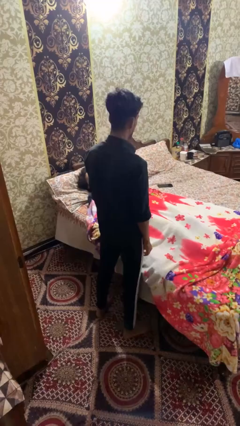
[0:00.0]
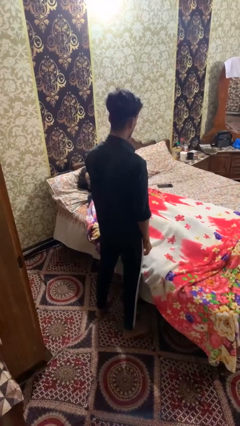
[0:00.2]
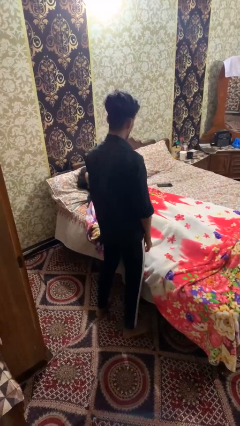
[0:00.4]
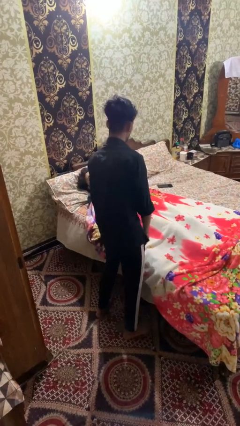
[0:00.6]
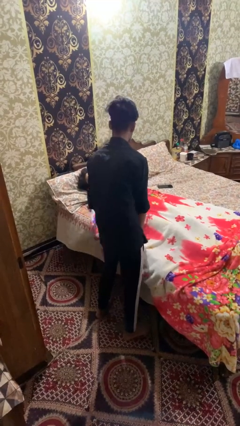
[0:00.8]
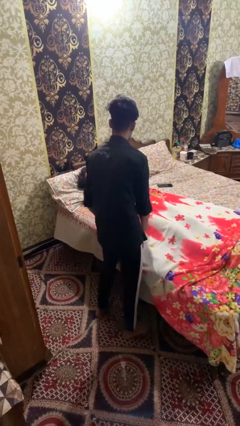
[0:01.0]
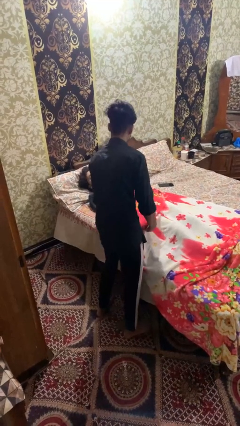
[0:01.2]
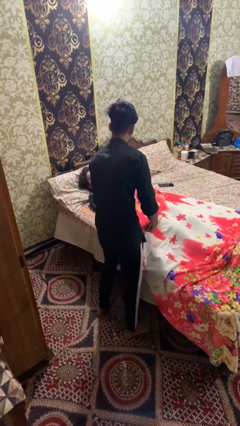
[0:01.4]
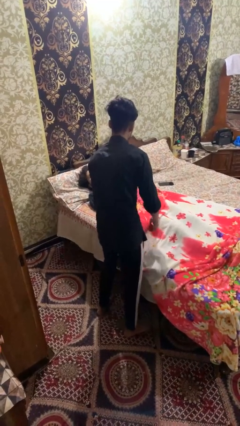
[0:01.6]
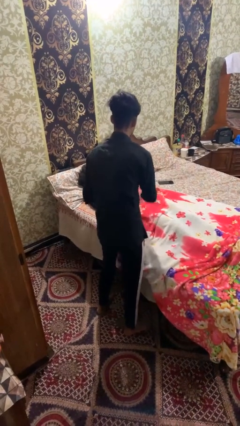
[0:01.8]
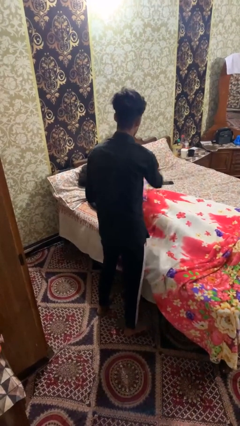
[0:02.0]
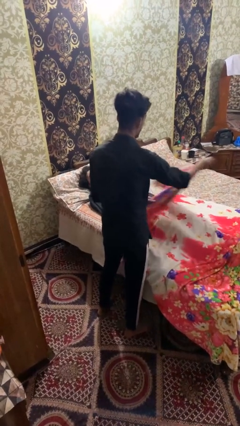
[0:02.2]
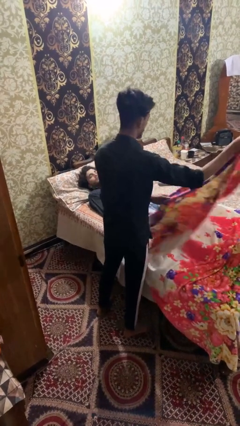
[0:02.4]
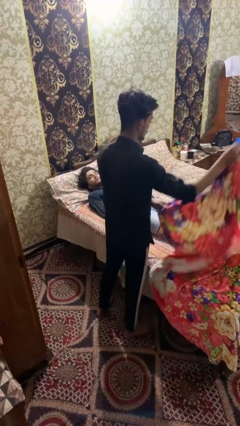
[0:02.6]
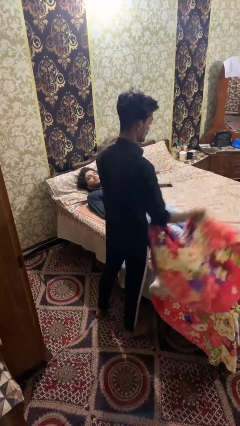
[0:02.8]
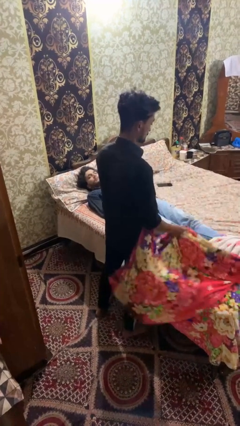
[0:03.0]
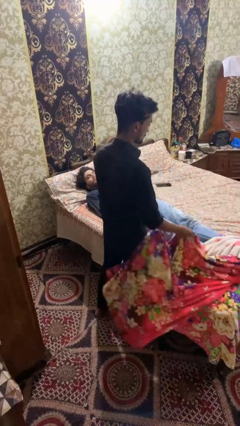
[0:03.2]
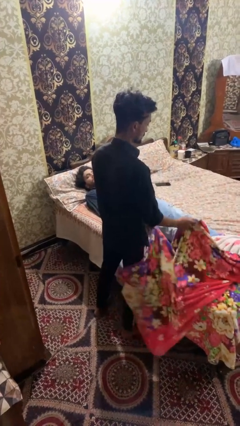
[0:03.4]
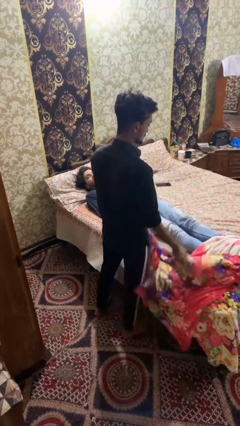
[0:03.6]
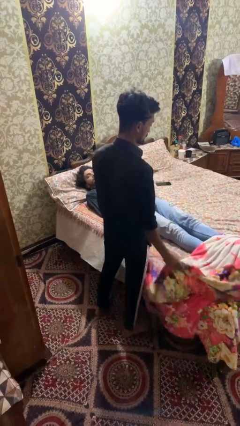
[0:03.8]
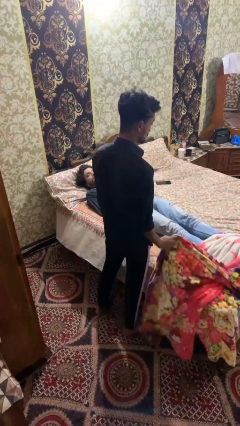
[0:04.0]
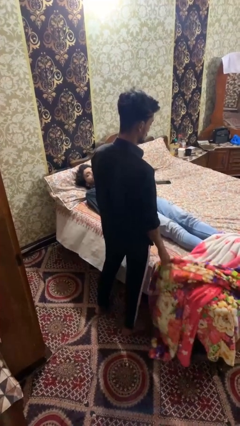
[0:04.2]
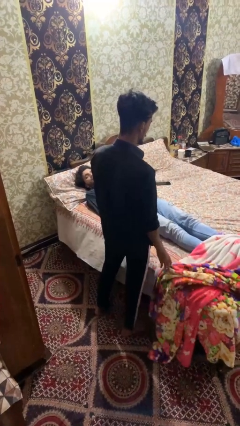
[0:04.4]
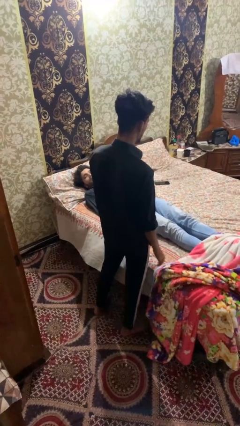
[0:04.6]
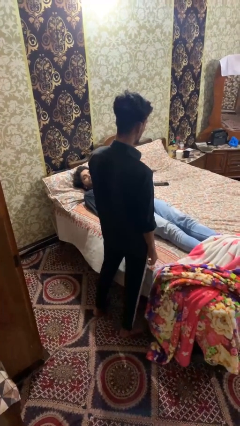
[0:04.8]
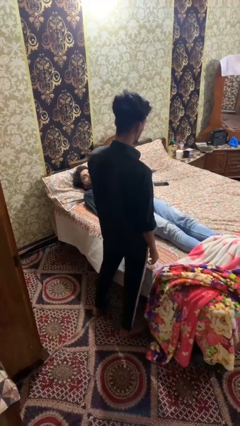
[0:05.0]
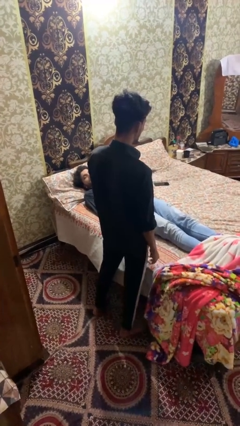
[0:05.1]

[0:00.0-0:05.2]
person uncovers friend with blanket

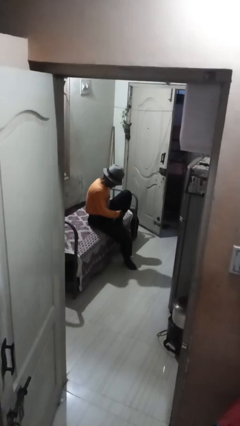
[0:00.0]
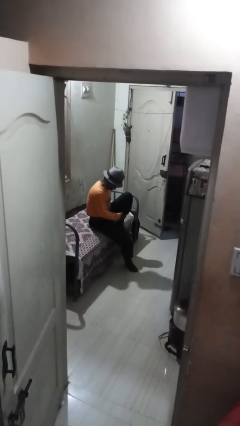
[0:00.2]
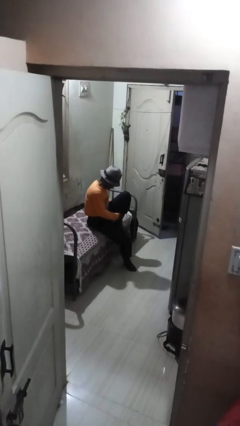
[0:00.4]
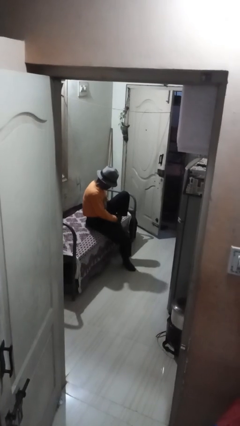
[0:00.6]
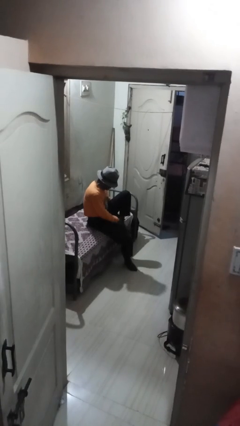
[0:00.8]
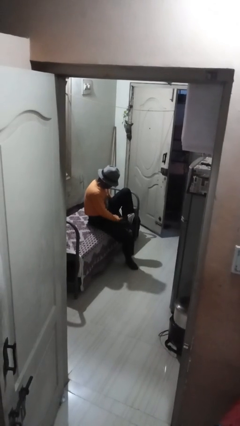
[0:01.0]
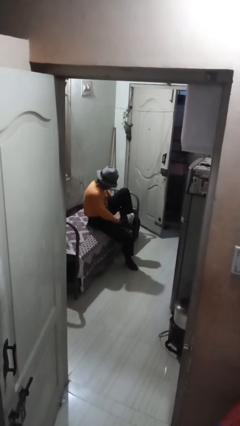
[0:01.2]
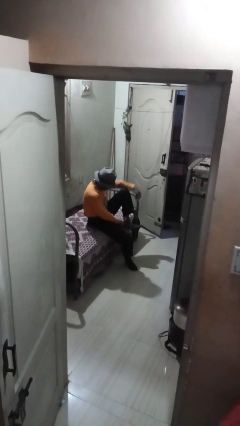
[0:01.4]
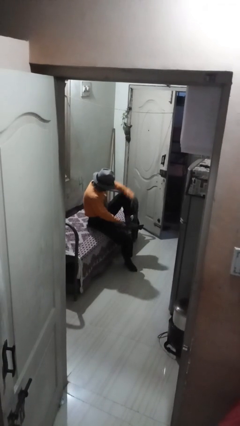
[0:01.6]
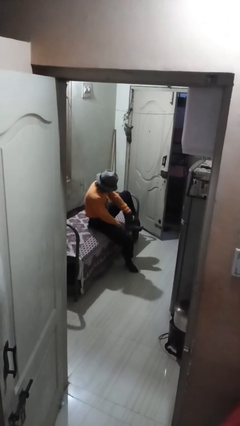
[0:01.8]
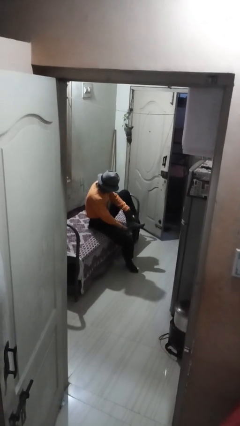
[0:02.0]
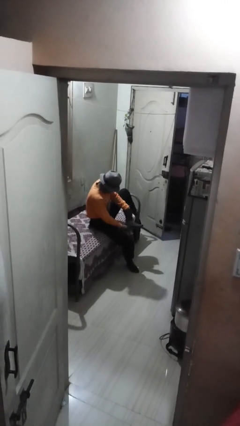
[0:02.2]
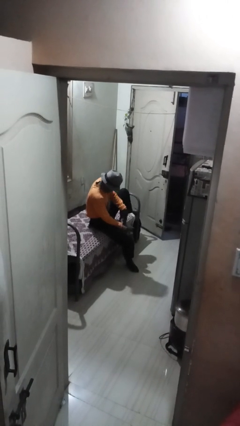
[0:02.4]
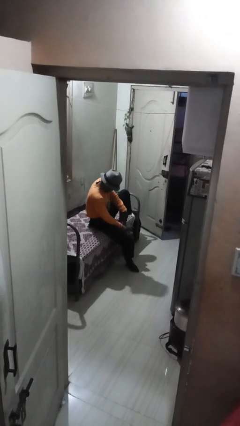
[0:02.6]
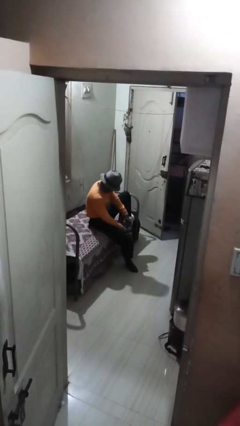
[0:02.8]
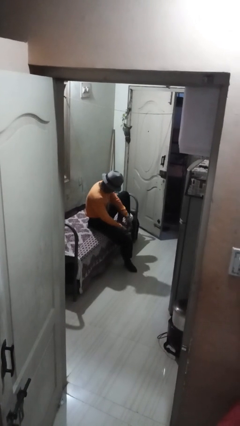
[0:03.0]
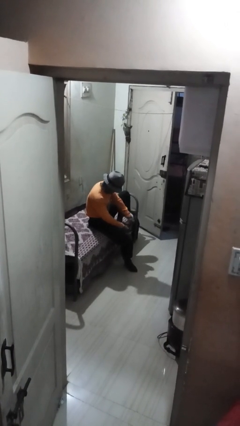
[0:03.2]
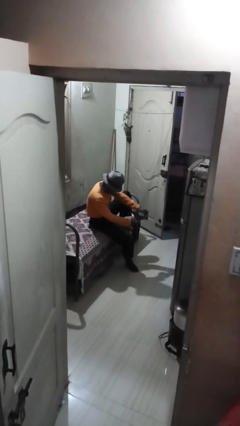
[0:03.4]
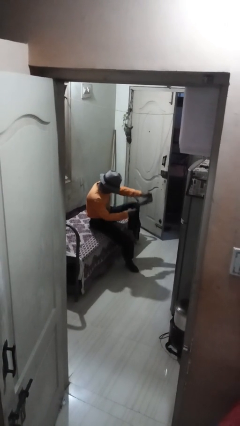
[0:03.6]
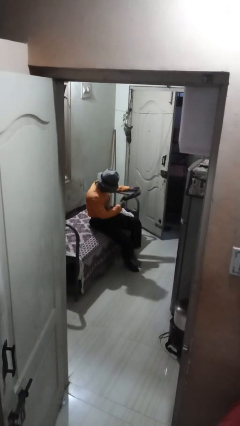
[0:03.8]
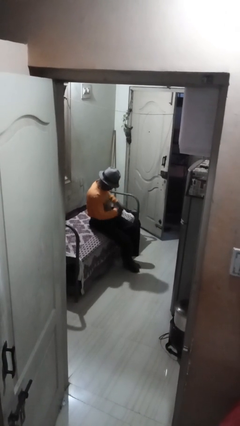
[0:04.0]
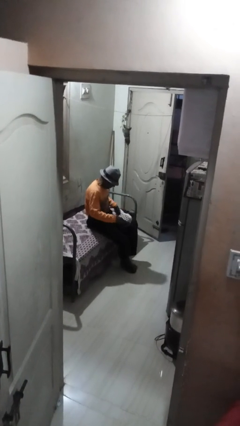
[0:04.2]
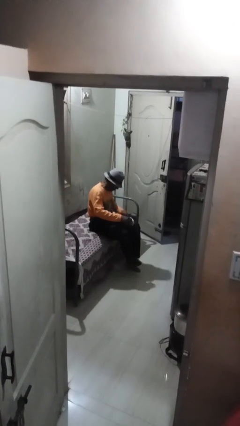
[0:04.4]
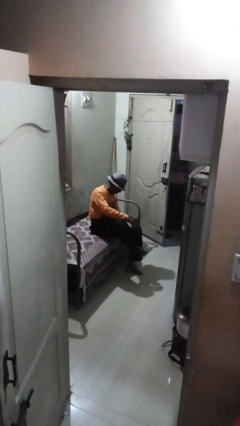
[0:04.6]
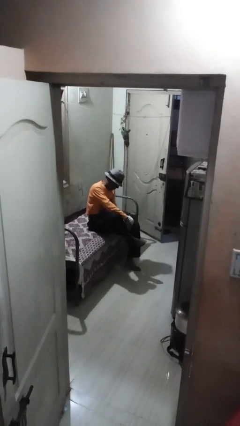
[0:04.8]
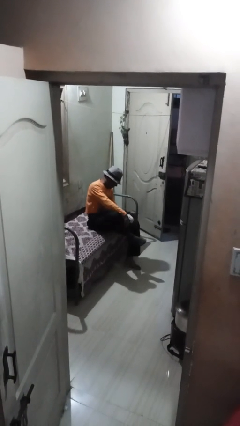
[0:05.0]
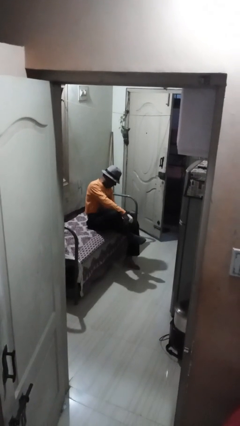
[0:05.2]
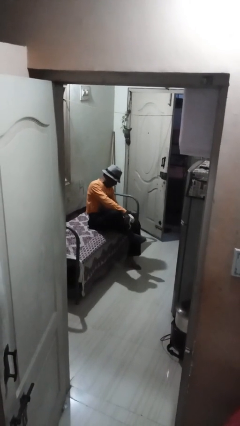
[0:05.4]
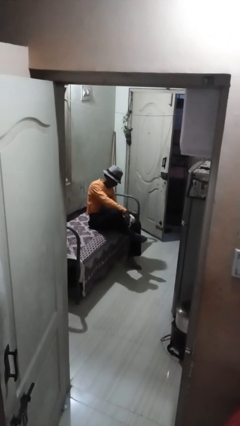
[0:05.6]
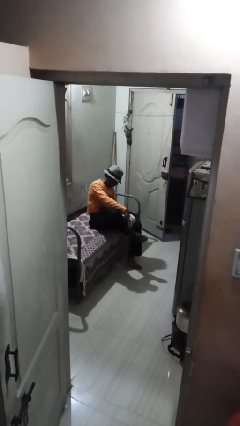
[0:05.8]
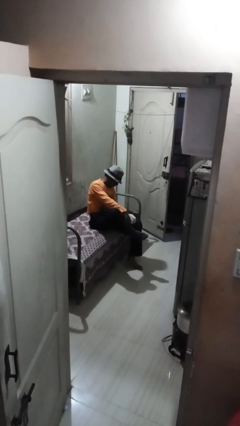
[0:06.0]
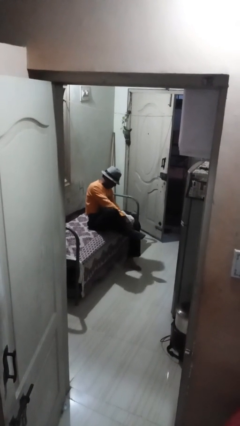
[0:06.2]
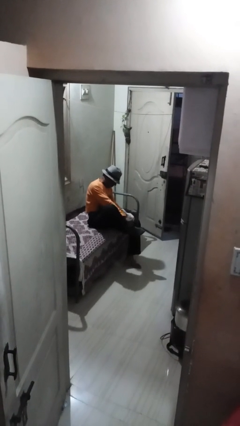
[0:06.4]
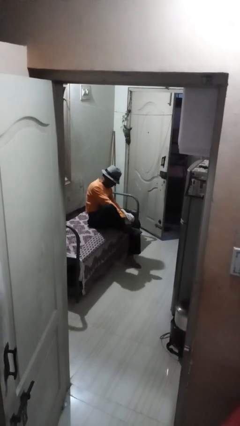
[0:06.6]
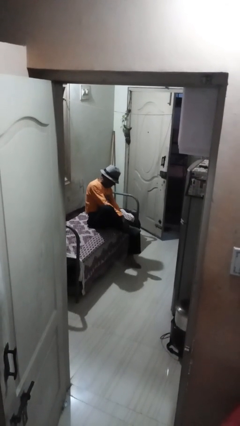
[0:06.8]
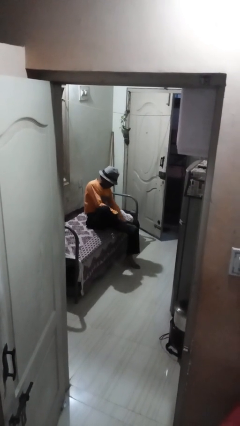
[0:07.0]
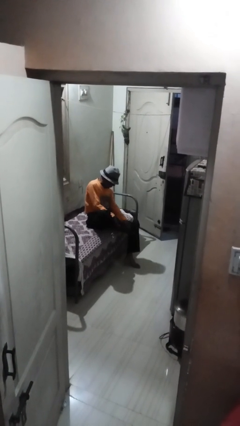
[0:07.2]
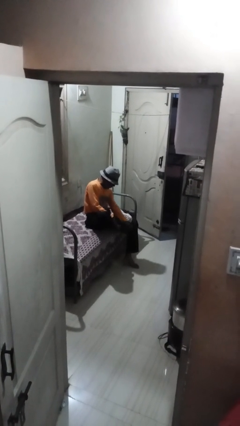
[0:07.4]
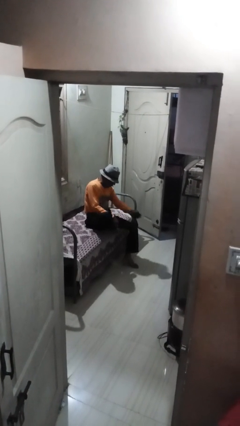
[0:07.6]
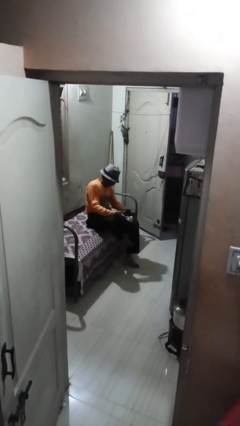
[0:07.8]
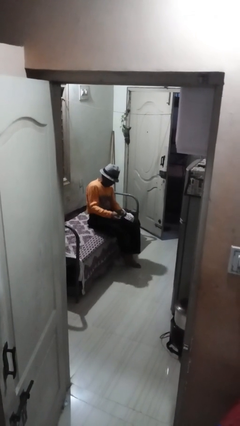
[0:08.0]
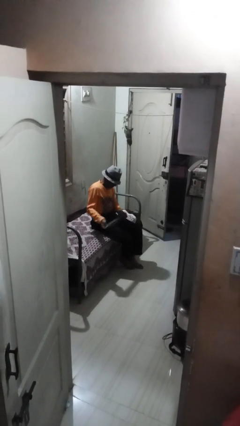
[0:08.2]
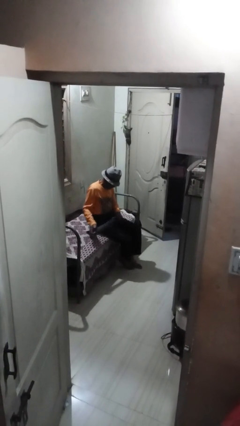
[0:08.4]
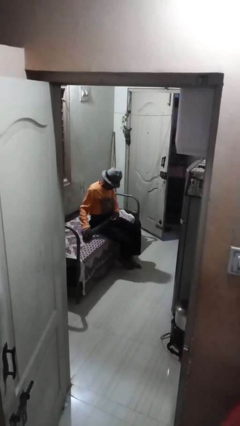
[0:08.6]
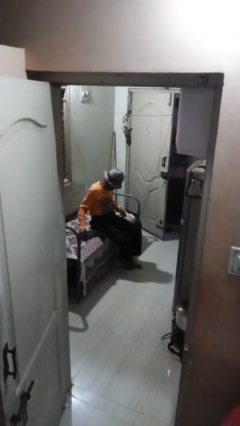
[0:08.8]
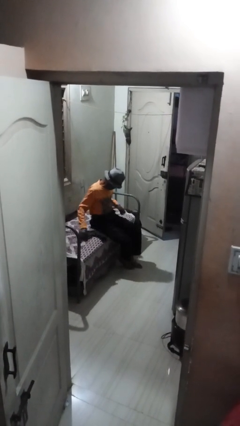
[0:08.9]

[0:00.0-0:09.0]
person takes off socks

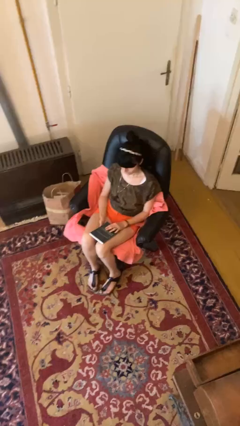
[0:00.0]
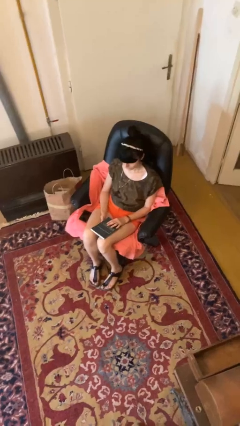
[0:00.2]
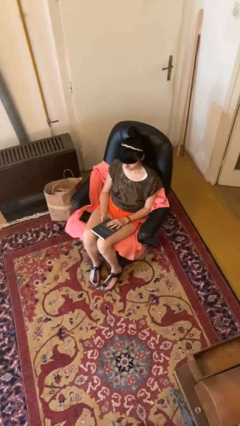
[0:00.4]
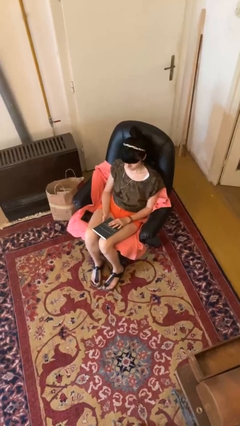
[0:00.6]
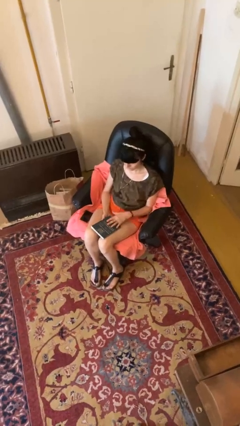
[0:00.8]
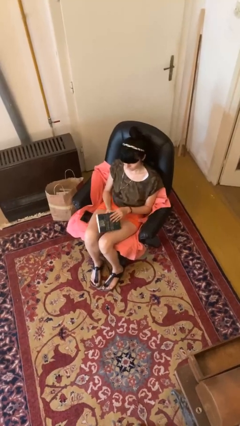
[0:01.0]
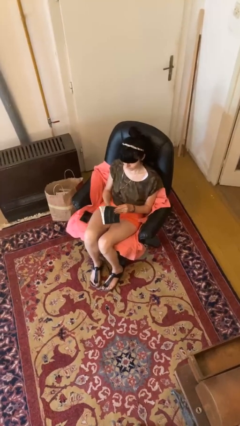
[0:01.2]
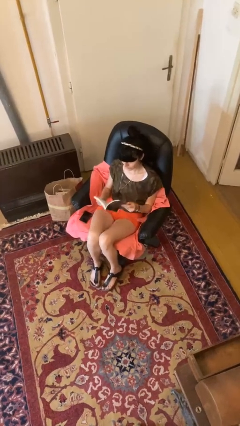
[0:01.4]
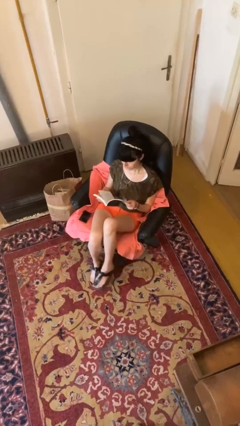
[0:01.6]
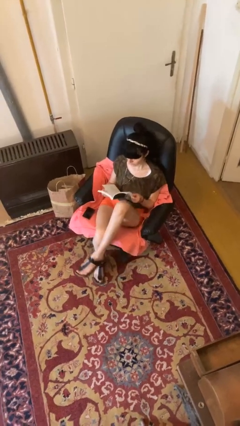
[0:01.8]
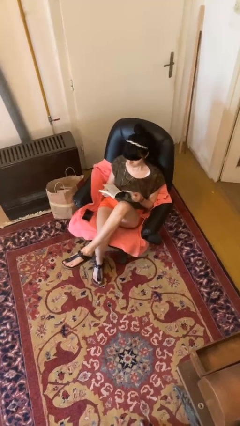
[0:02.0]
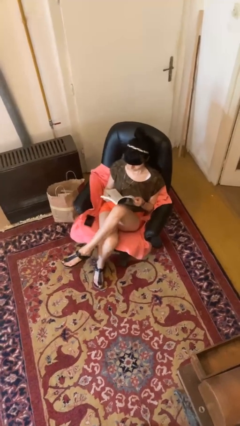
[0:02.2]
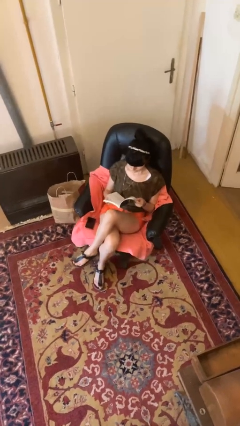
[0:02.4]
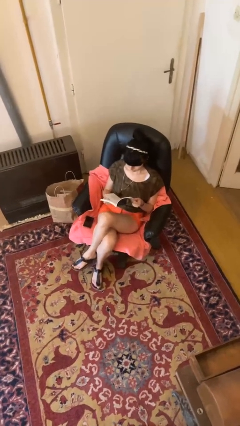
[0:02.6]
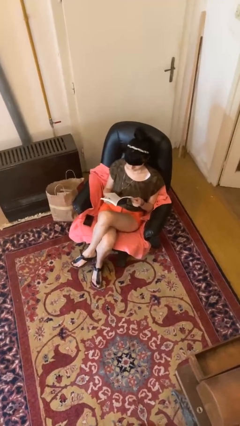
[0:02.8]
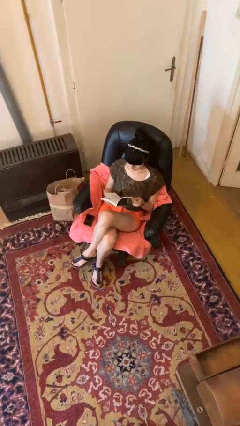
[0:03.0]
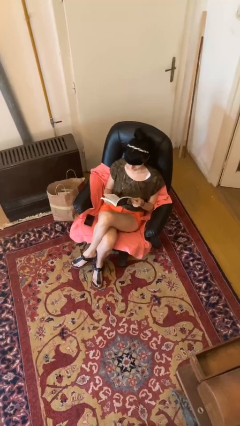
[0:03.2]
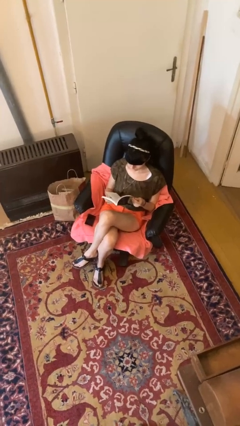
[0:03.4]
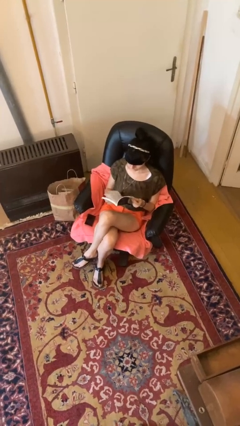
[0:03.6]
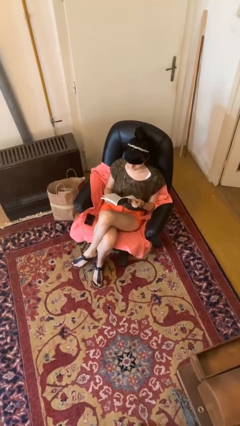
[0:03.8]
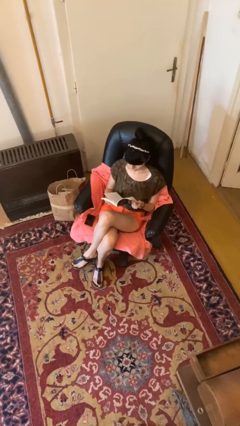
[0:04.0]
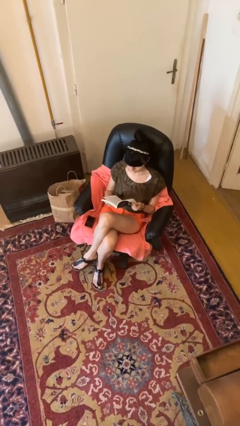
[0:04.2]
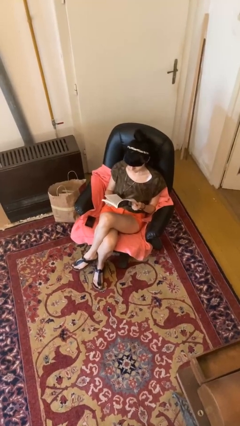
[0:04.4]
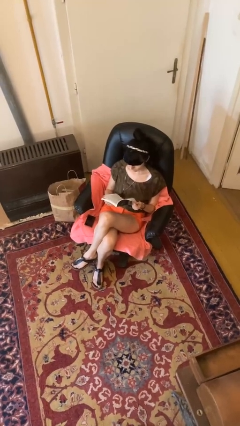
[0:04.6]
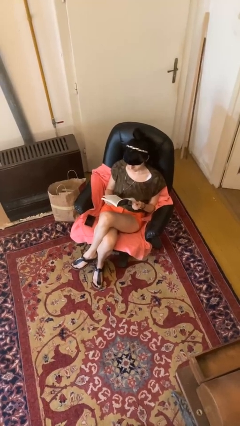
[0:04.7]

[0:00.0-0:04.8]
person reads book
